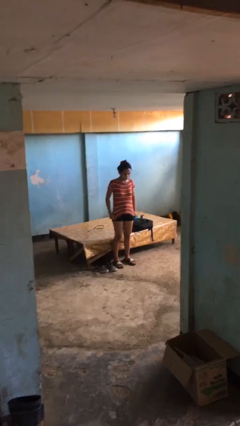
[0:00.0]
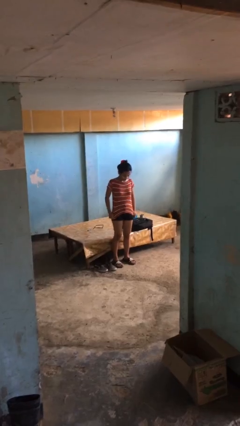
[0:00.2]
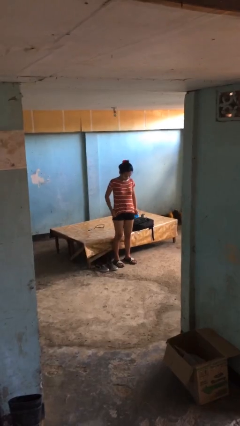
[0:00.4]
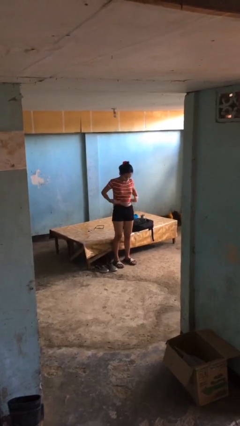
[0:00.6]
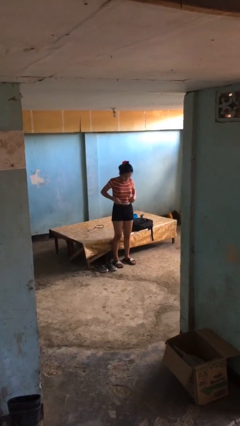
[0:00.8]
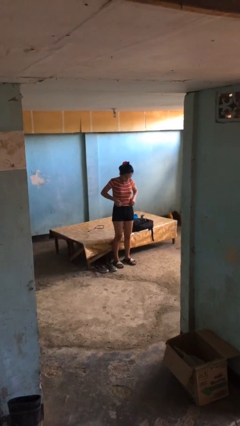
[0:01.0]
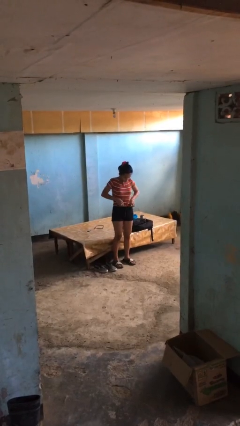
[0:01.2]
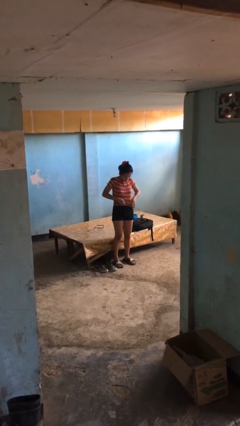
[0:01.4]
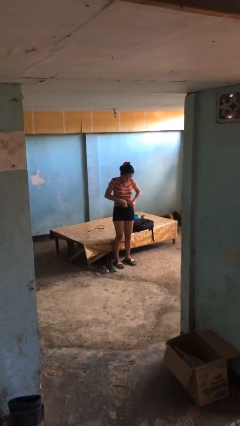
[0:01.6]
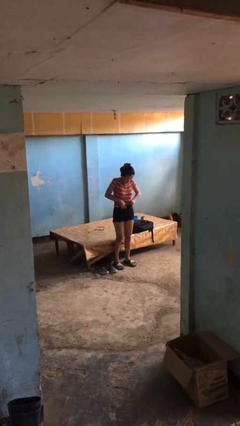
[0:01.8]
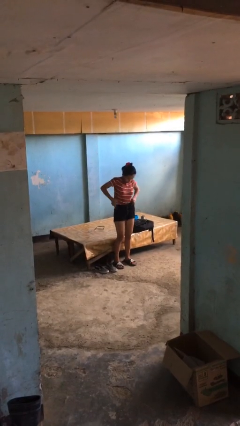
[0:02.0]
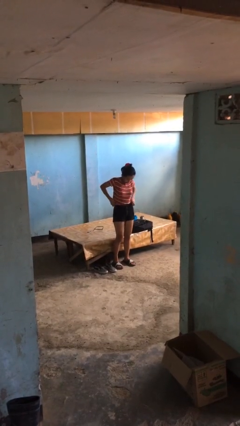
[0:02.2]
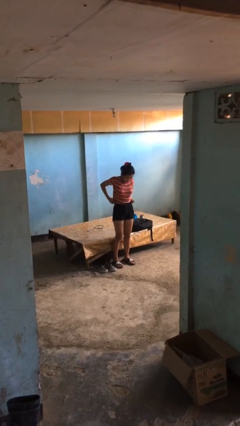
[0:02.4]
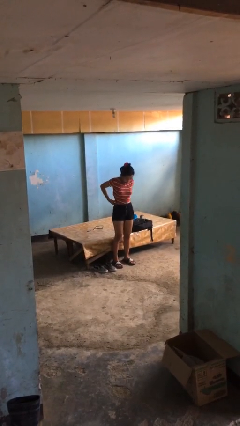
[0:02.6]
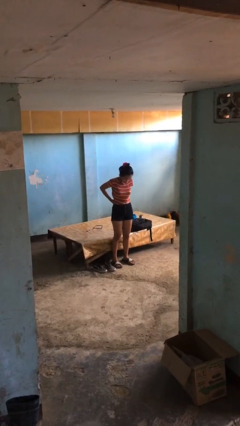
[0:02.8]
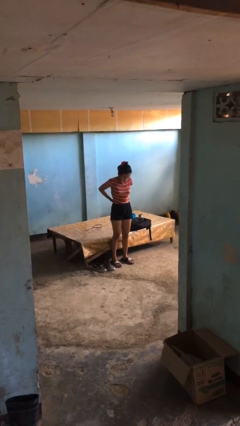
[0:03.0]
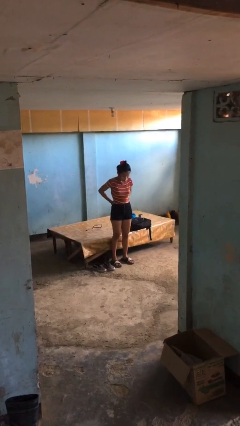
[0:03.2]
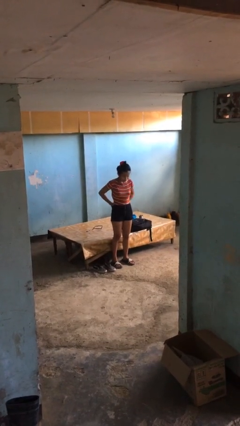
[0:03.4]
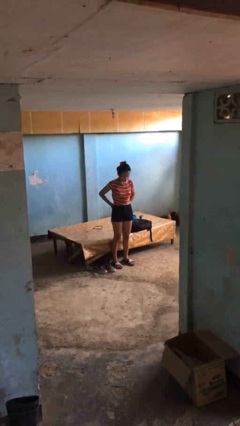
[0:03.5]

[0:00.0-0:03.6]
person tucks in shirt

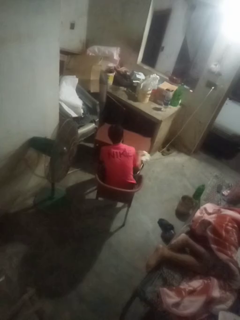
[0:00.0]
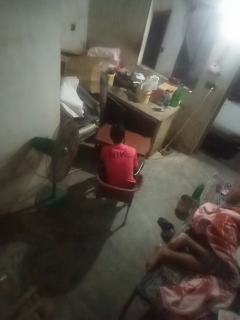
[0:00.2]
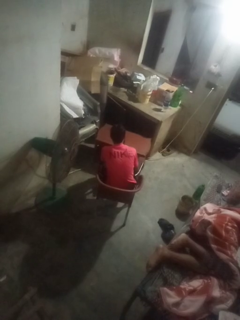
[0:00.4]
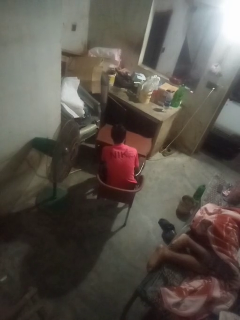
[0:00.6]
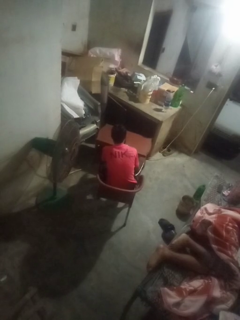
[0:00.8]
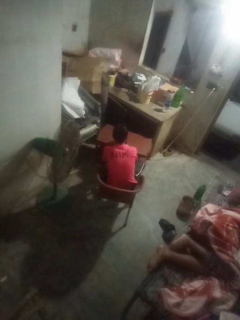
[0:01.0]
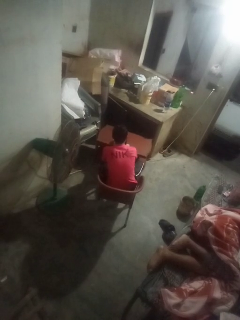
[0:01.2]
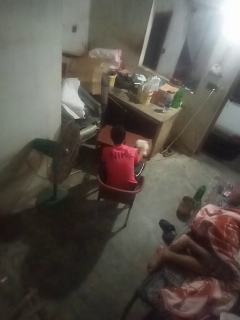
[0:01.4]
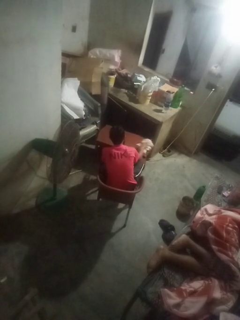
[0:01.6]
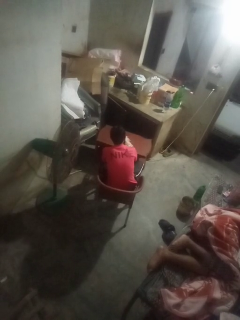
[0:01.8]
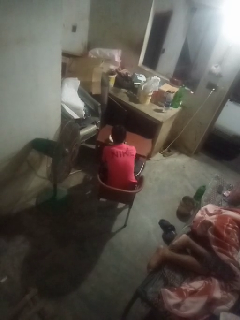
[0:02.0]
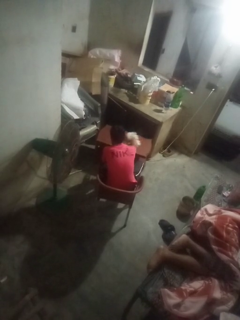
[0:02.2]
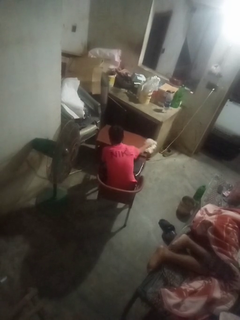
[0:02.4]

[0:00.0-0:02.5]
person cleans table with rag

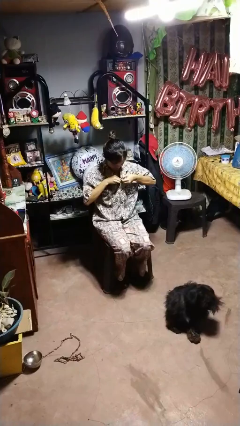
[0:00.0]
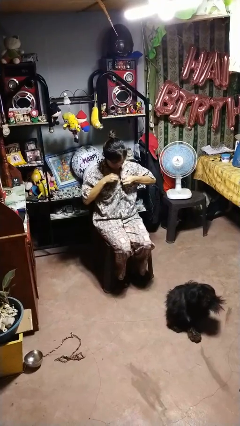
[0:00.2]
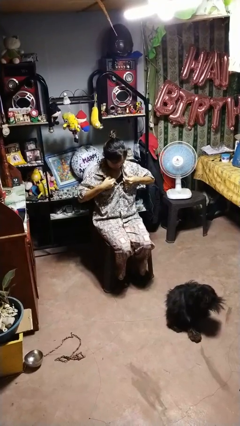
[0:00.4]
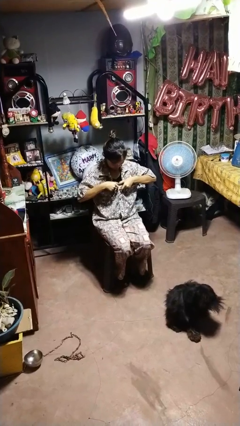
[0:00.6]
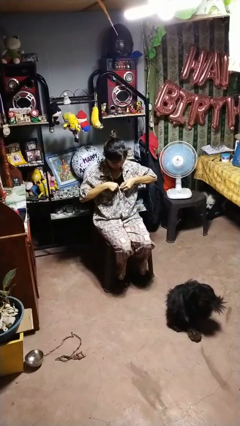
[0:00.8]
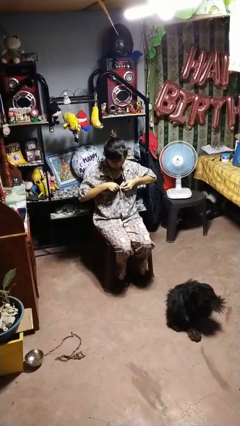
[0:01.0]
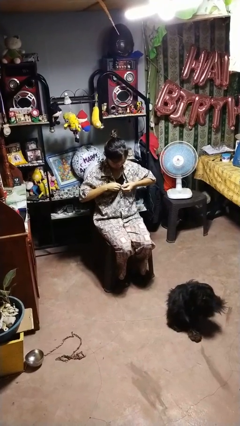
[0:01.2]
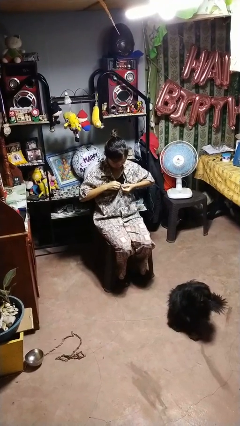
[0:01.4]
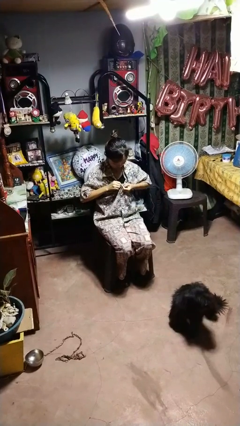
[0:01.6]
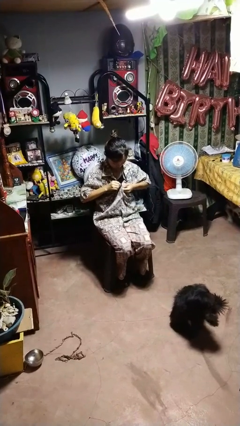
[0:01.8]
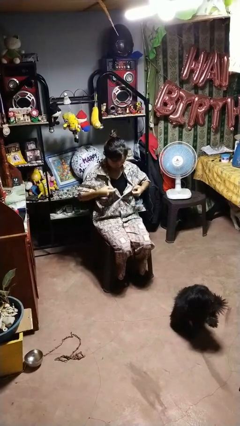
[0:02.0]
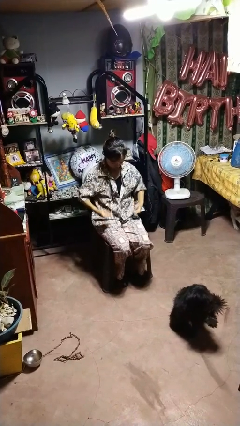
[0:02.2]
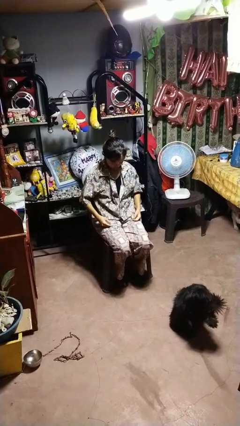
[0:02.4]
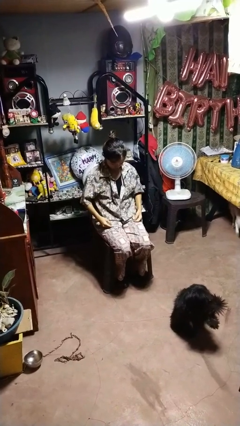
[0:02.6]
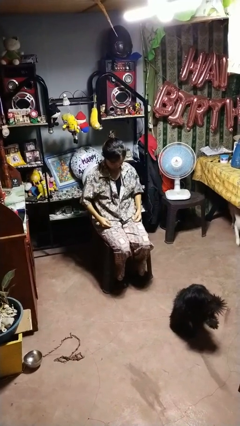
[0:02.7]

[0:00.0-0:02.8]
person unbuttons shirt

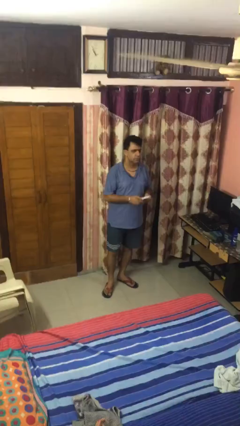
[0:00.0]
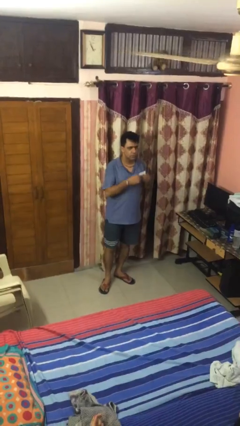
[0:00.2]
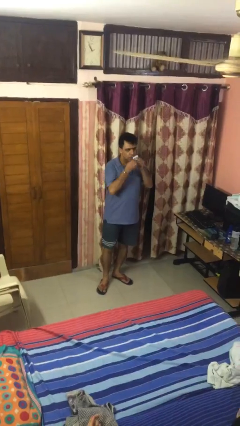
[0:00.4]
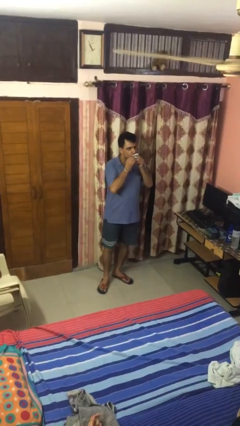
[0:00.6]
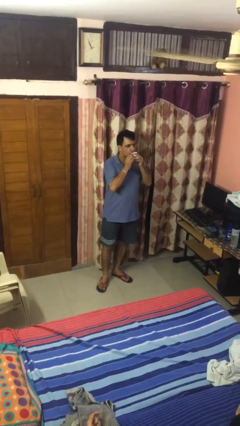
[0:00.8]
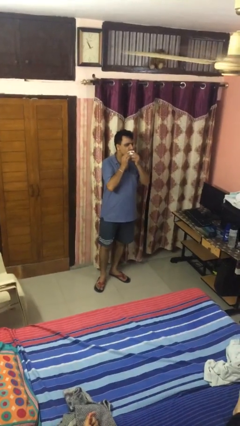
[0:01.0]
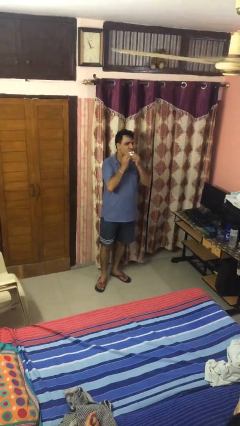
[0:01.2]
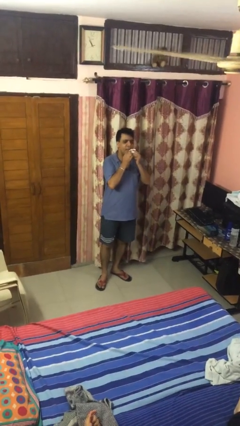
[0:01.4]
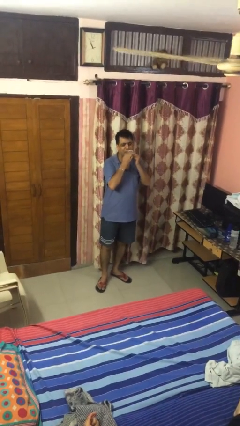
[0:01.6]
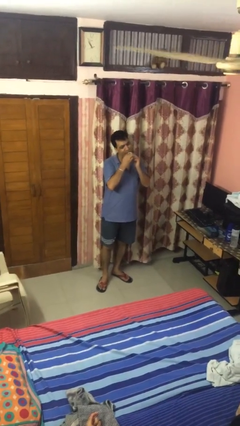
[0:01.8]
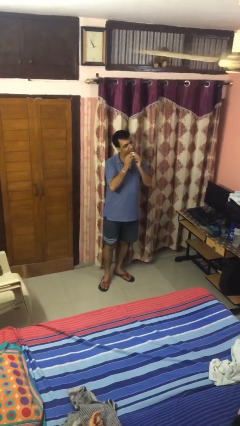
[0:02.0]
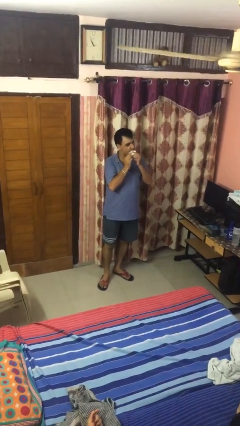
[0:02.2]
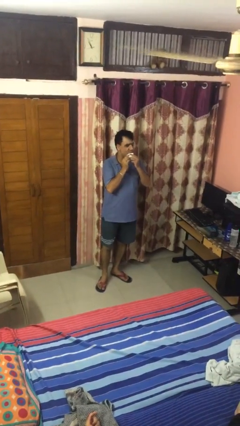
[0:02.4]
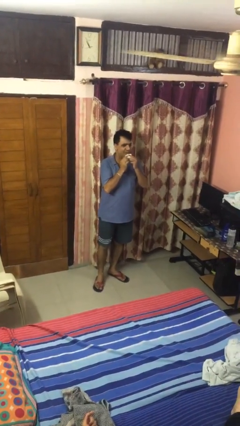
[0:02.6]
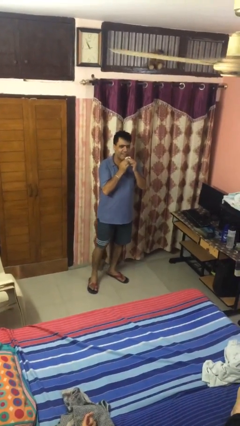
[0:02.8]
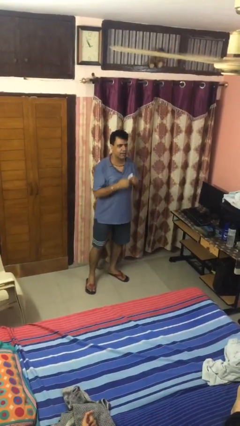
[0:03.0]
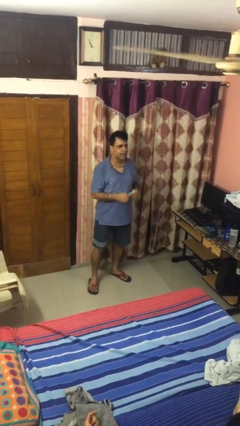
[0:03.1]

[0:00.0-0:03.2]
person wipes mouth with napkin

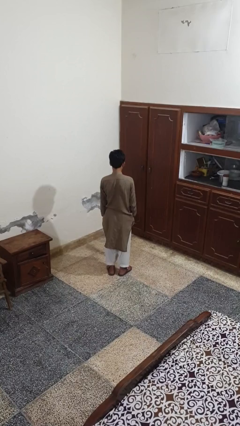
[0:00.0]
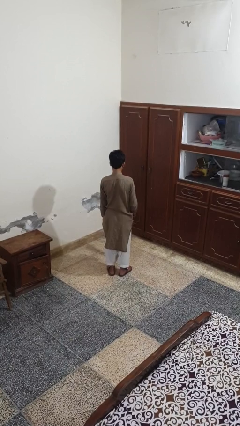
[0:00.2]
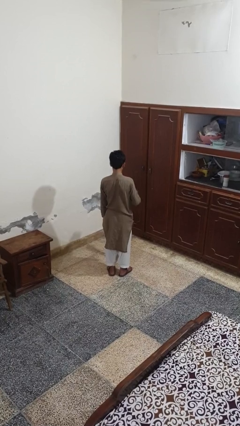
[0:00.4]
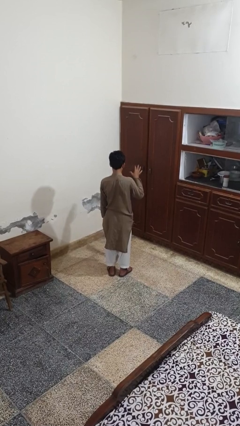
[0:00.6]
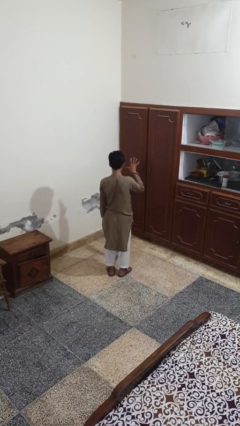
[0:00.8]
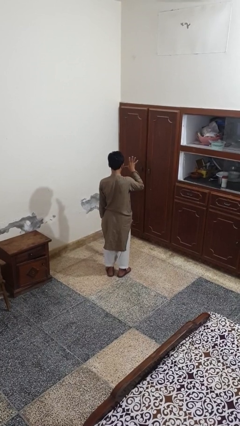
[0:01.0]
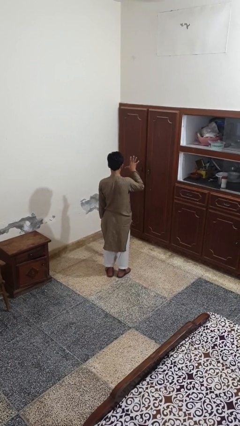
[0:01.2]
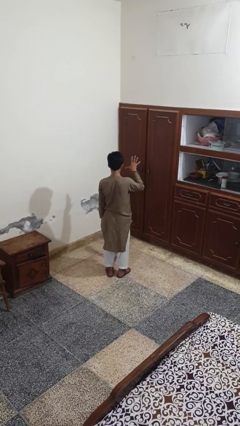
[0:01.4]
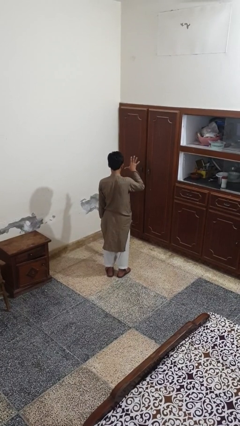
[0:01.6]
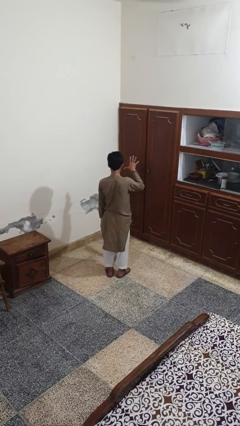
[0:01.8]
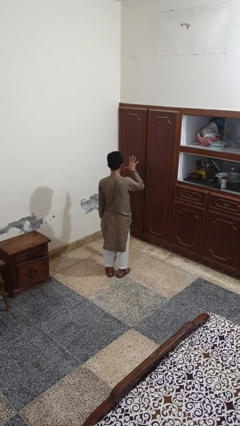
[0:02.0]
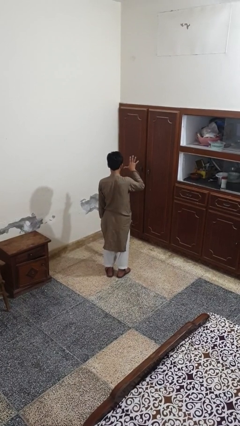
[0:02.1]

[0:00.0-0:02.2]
person gestures number five

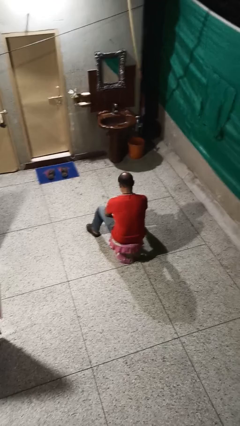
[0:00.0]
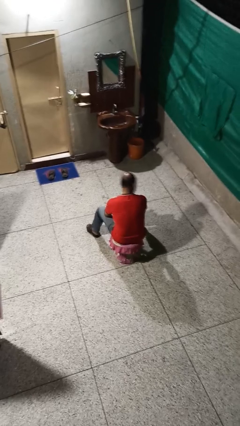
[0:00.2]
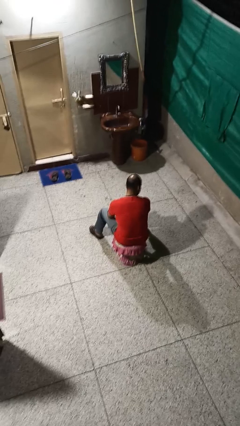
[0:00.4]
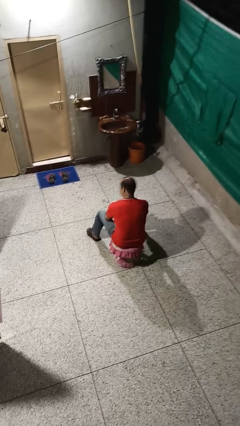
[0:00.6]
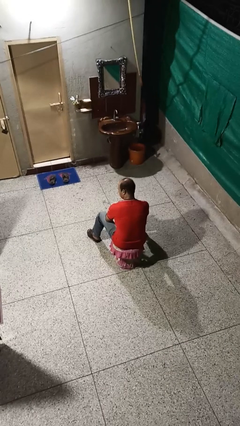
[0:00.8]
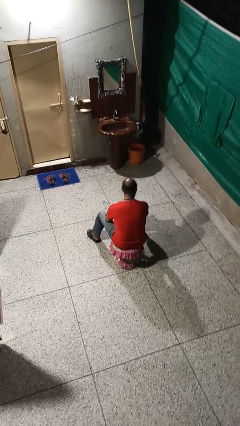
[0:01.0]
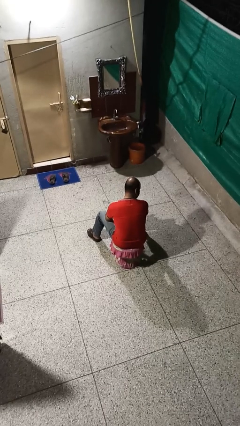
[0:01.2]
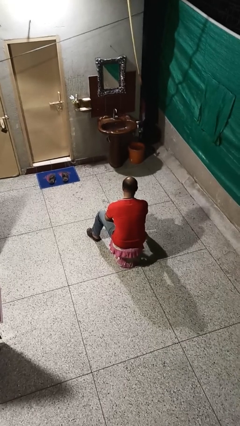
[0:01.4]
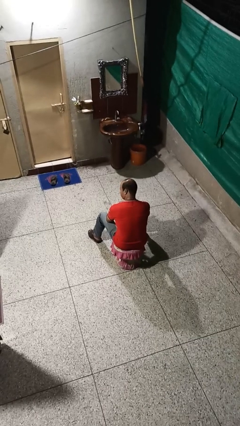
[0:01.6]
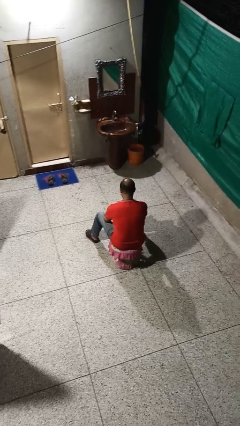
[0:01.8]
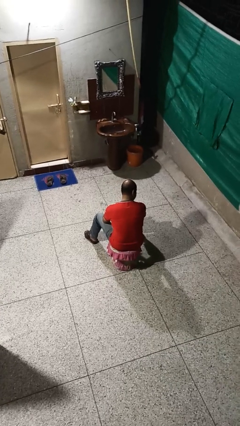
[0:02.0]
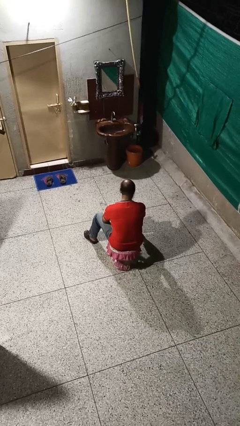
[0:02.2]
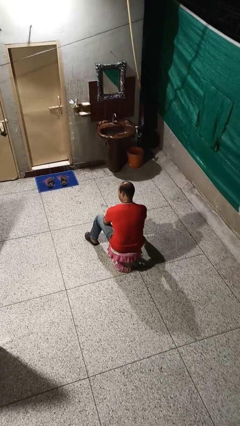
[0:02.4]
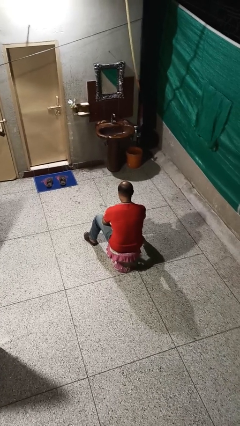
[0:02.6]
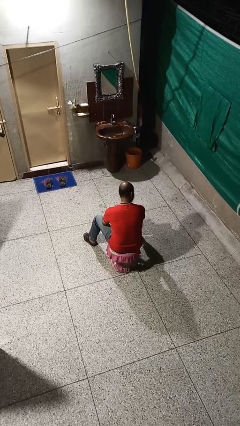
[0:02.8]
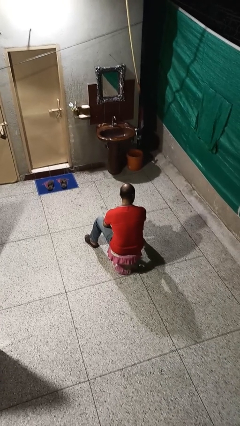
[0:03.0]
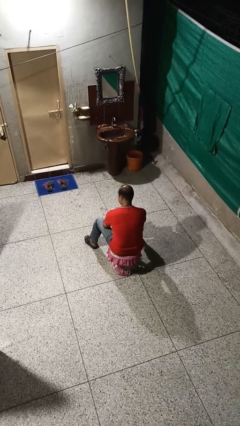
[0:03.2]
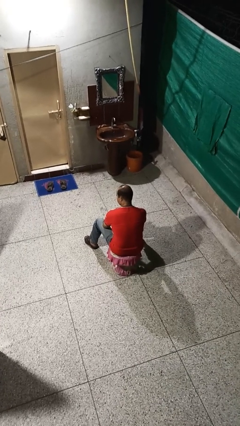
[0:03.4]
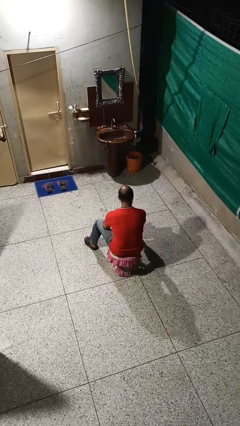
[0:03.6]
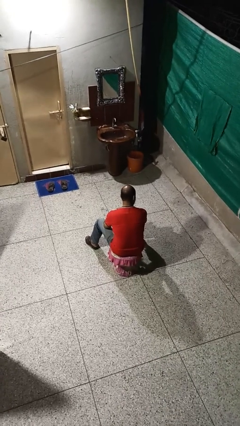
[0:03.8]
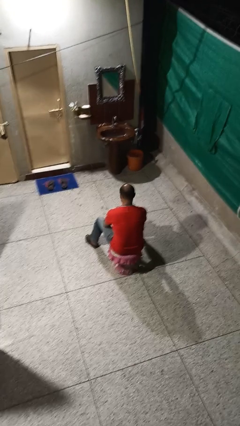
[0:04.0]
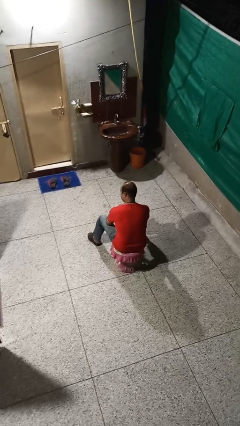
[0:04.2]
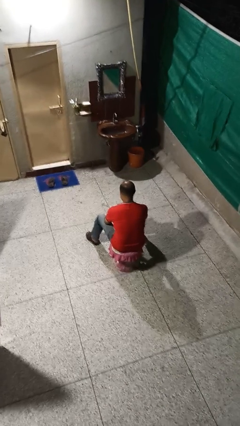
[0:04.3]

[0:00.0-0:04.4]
person shakes head
